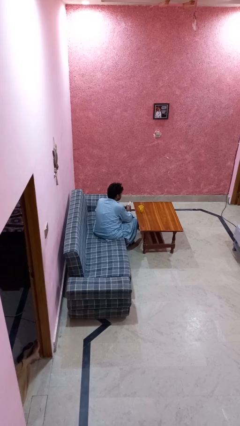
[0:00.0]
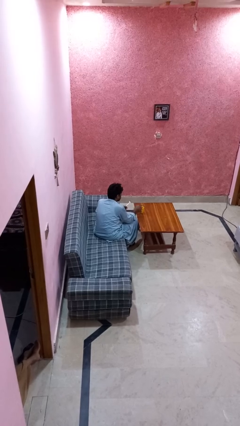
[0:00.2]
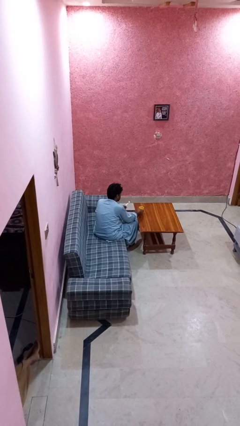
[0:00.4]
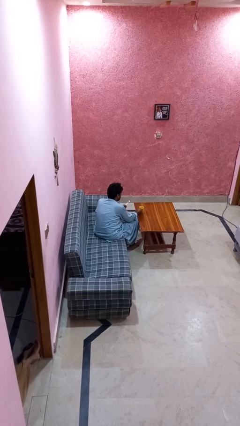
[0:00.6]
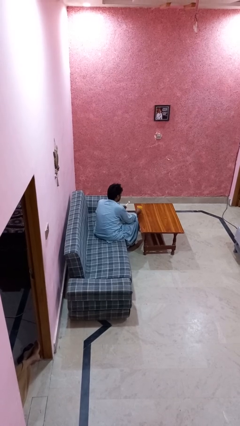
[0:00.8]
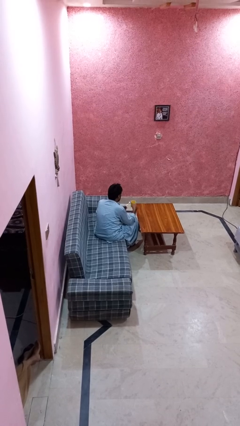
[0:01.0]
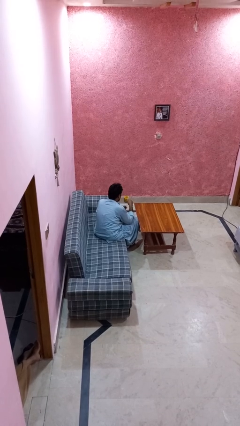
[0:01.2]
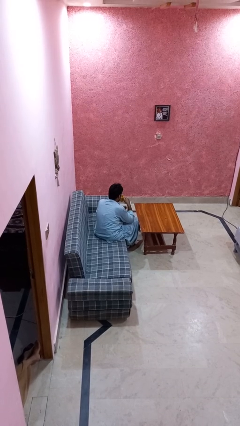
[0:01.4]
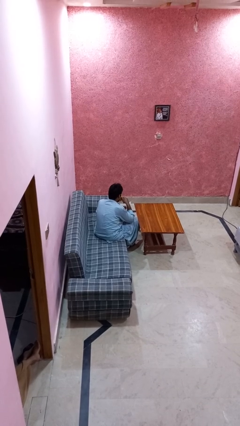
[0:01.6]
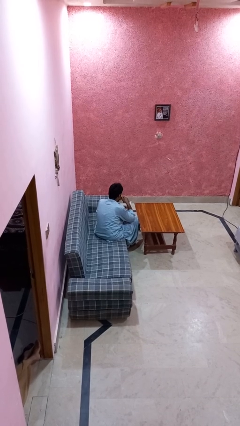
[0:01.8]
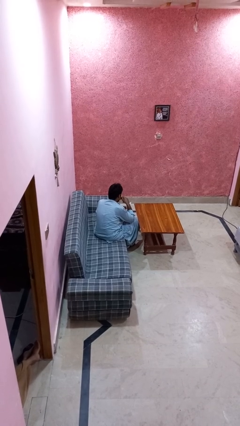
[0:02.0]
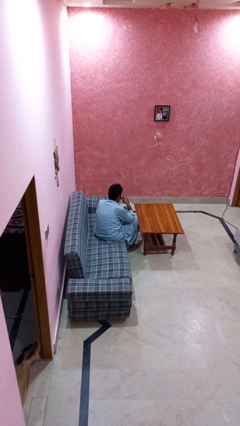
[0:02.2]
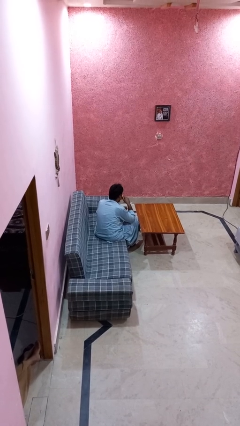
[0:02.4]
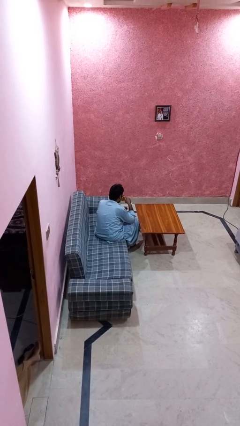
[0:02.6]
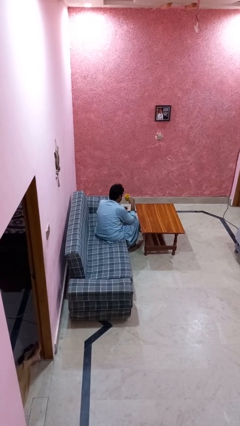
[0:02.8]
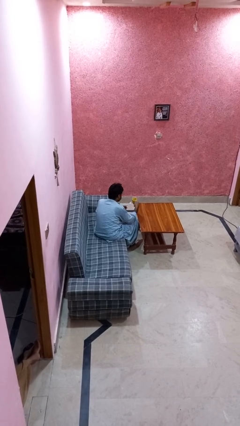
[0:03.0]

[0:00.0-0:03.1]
person drinks from mug

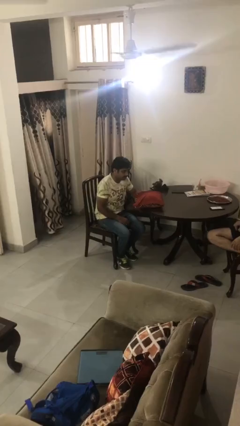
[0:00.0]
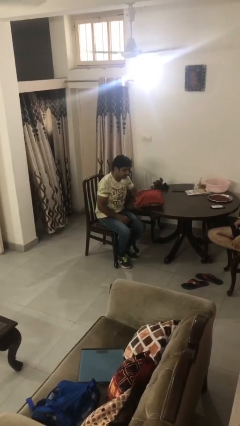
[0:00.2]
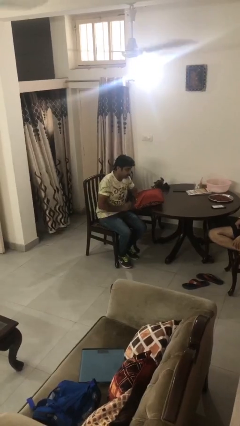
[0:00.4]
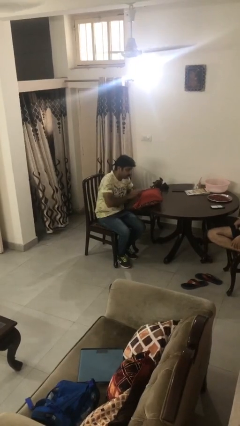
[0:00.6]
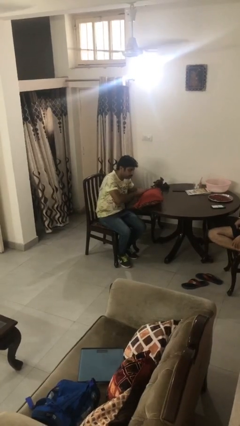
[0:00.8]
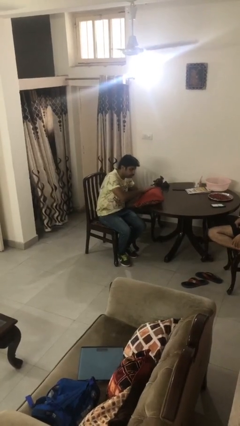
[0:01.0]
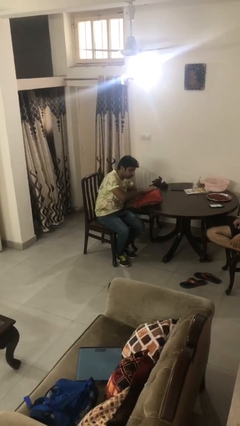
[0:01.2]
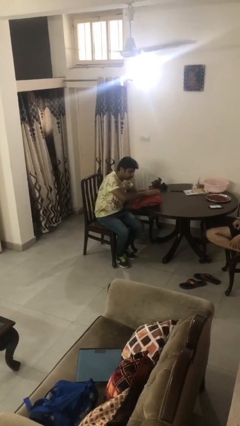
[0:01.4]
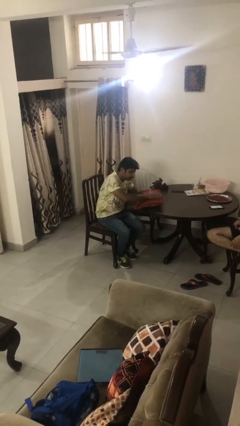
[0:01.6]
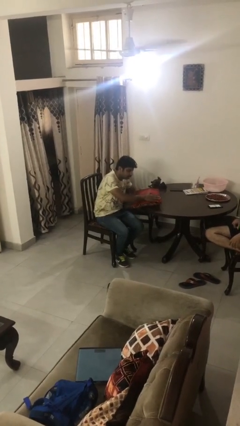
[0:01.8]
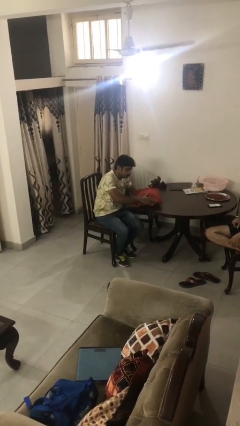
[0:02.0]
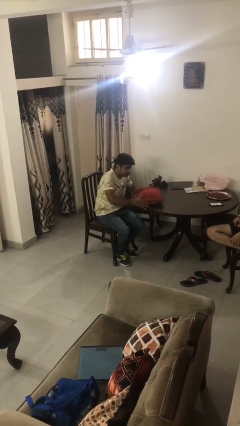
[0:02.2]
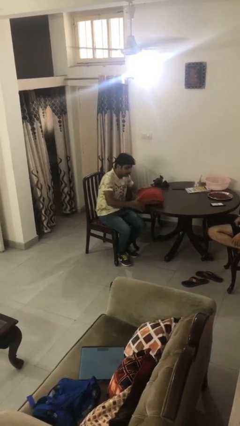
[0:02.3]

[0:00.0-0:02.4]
person waves hand over object

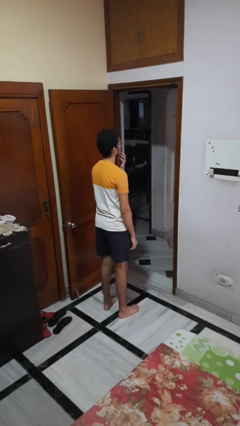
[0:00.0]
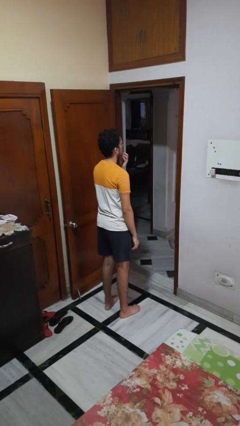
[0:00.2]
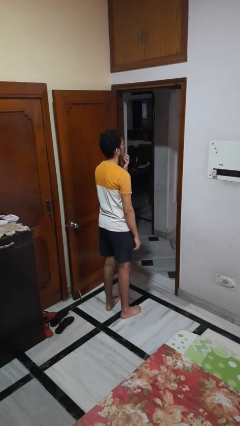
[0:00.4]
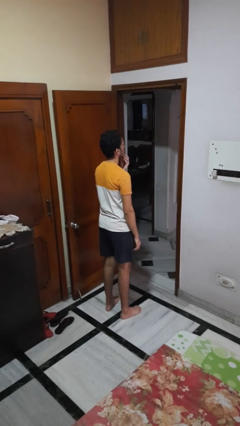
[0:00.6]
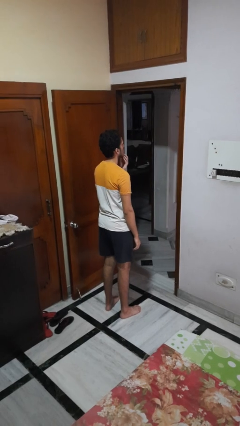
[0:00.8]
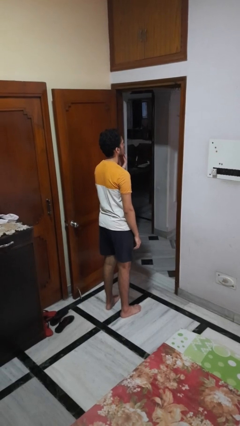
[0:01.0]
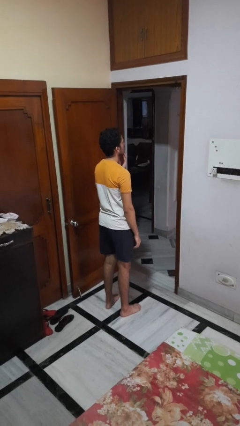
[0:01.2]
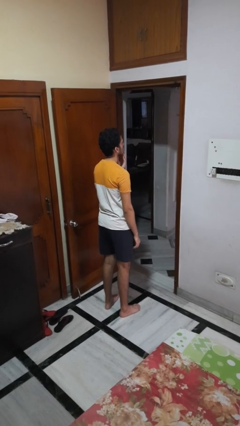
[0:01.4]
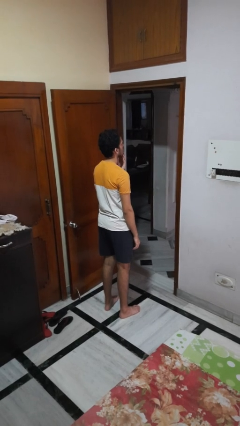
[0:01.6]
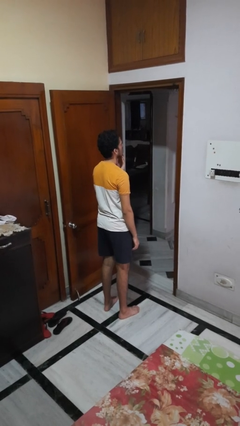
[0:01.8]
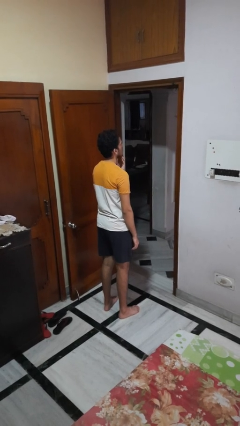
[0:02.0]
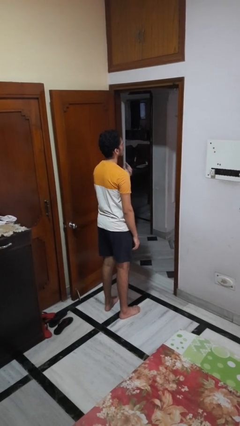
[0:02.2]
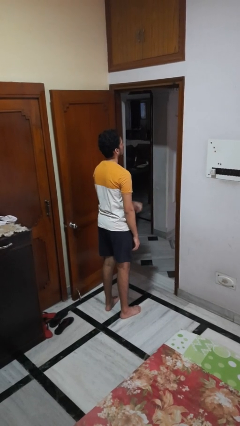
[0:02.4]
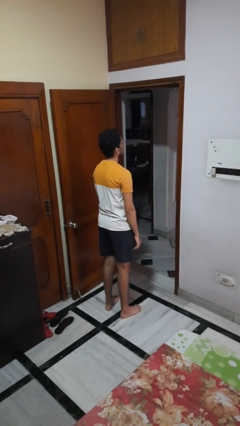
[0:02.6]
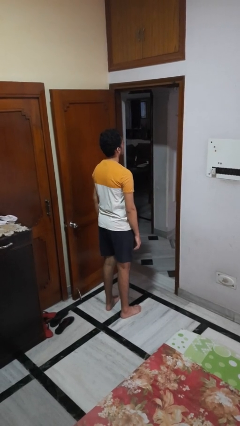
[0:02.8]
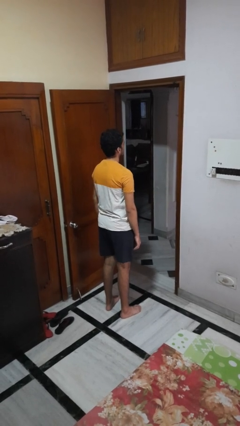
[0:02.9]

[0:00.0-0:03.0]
person strokes chin

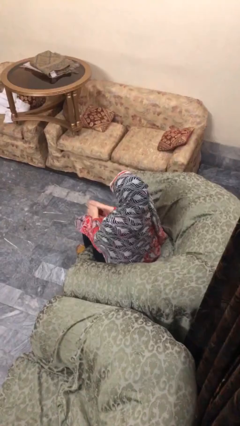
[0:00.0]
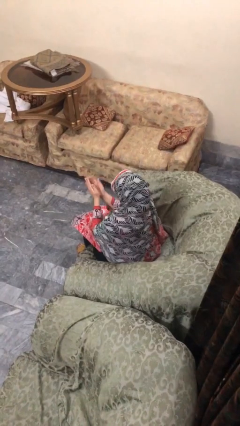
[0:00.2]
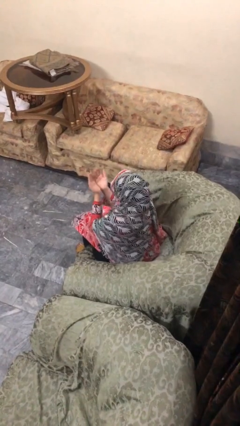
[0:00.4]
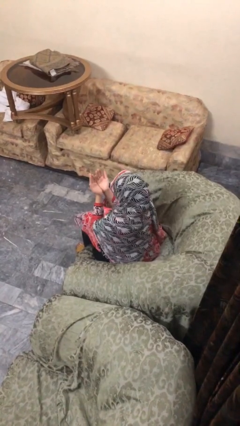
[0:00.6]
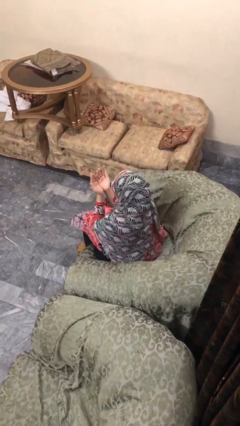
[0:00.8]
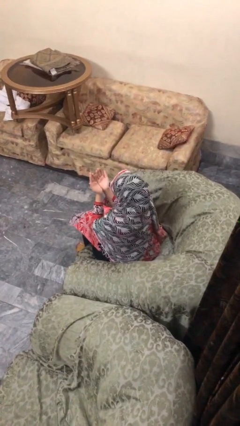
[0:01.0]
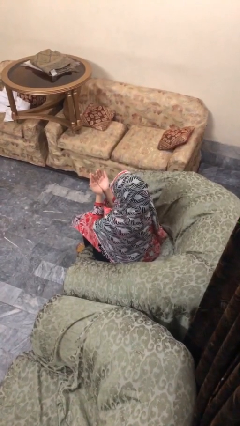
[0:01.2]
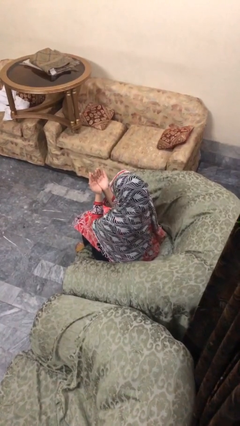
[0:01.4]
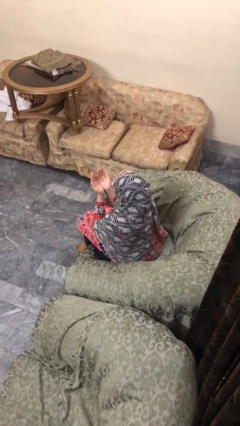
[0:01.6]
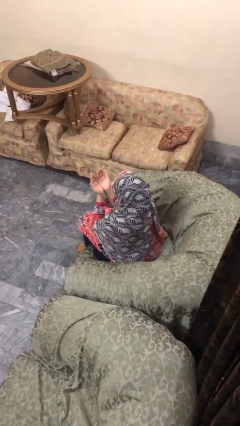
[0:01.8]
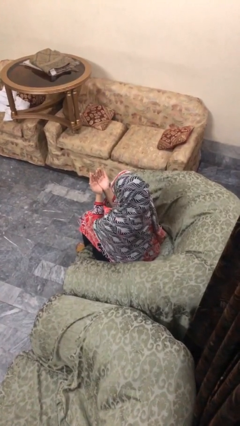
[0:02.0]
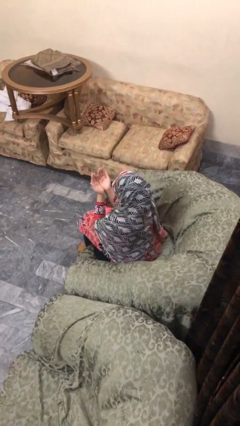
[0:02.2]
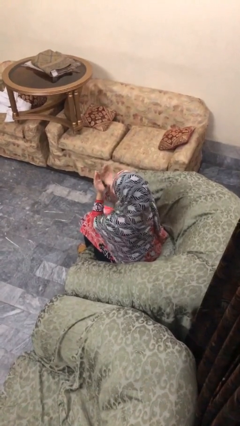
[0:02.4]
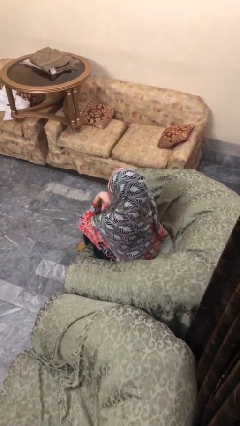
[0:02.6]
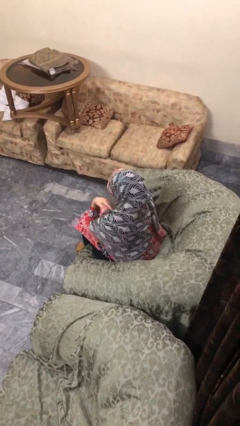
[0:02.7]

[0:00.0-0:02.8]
person prays

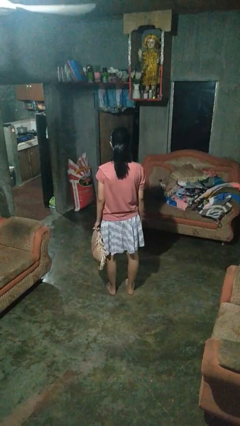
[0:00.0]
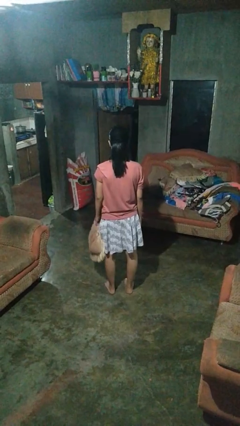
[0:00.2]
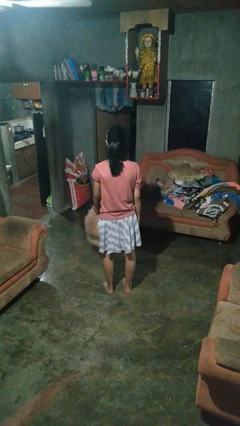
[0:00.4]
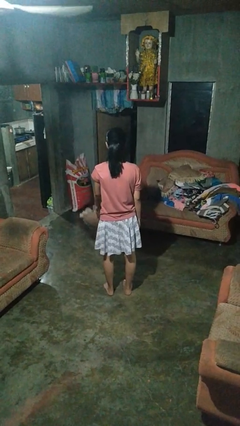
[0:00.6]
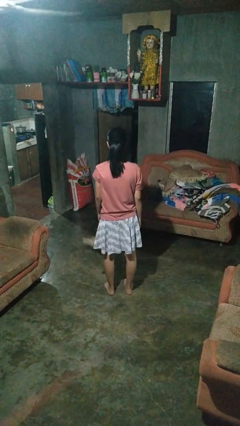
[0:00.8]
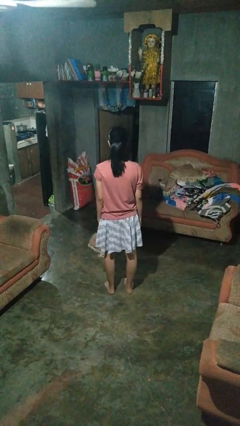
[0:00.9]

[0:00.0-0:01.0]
person throws object to ground

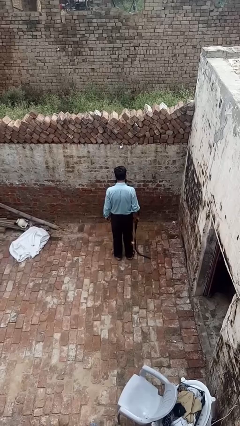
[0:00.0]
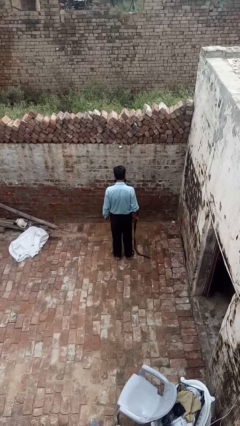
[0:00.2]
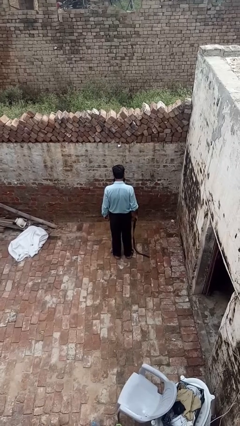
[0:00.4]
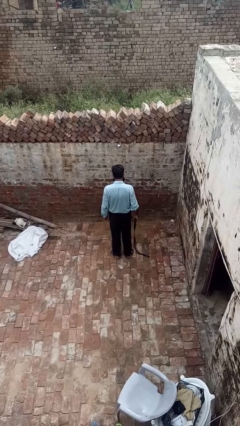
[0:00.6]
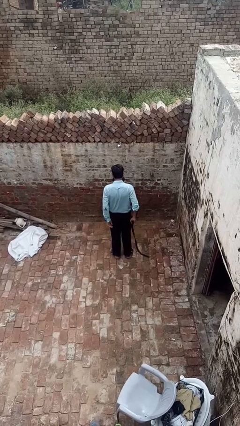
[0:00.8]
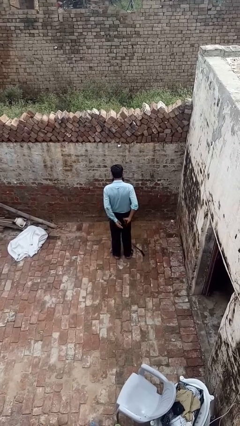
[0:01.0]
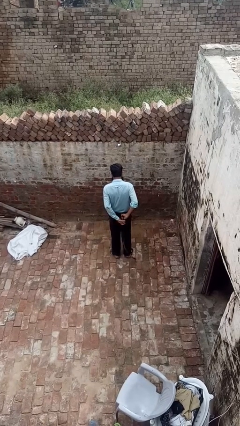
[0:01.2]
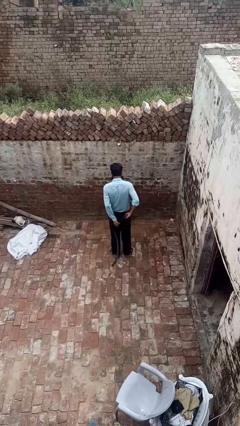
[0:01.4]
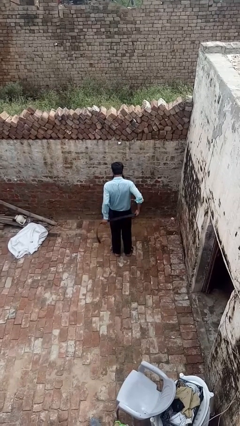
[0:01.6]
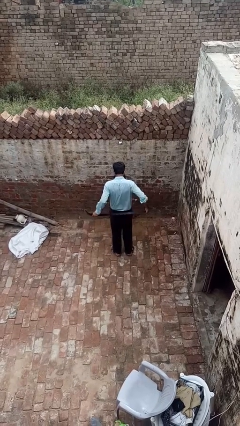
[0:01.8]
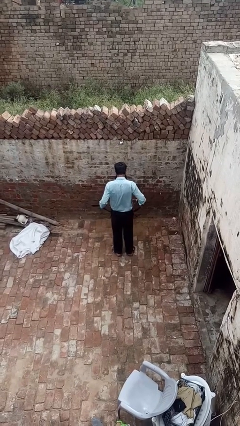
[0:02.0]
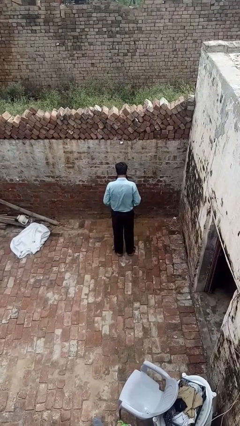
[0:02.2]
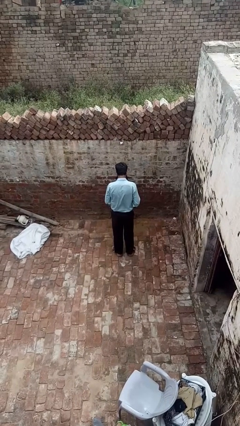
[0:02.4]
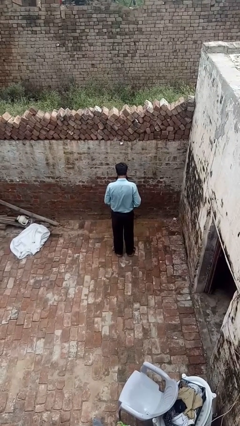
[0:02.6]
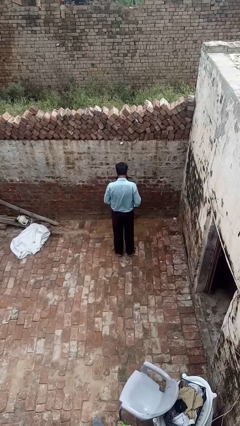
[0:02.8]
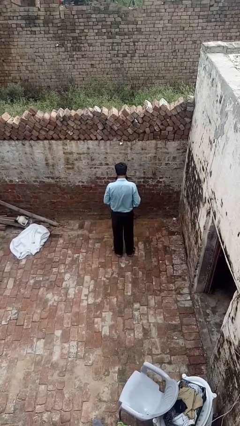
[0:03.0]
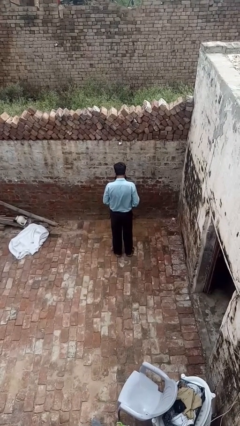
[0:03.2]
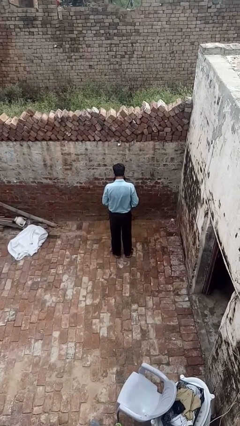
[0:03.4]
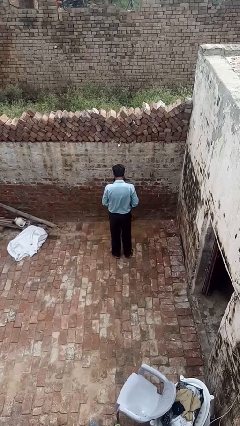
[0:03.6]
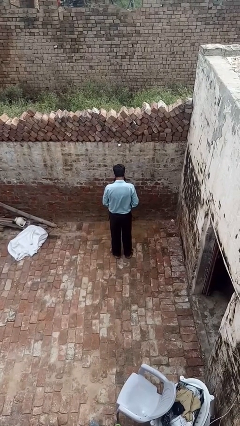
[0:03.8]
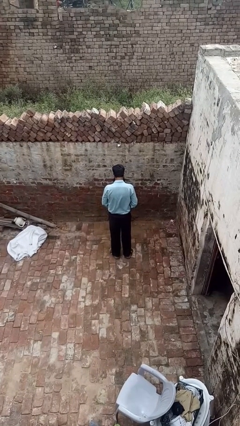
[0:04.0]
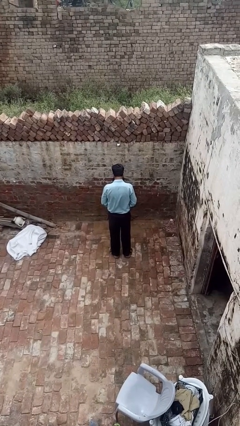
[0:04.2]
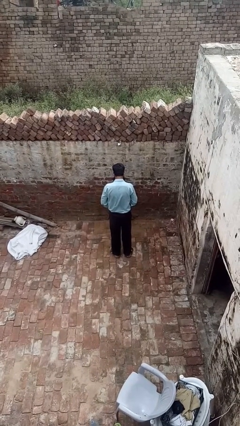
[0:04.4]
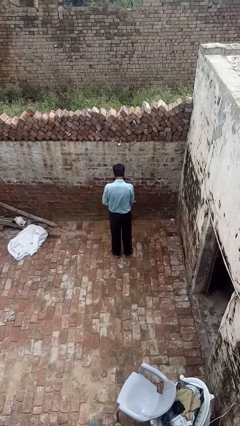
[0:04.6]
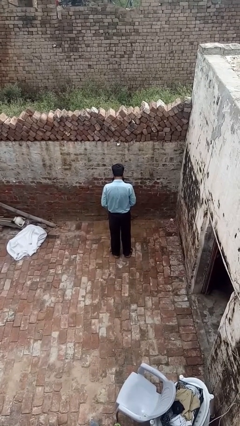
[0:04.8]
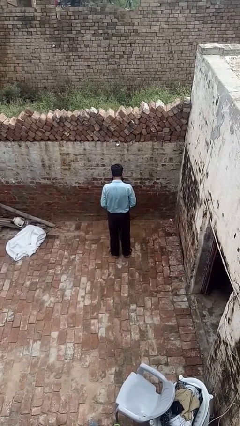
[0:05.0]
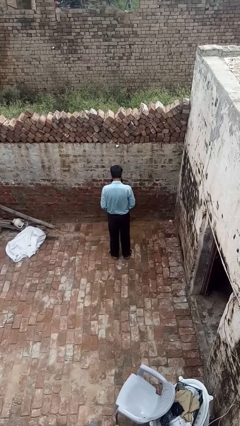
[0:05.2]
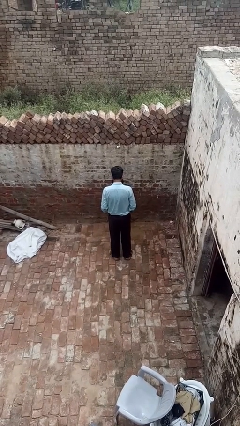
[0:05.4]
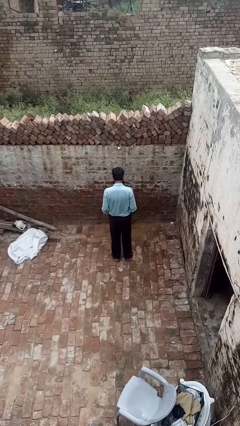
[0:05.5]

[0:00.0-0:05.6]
person puts on belt
